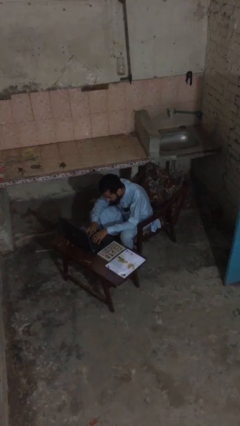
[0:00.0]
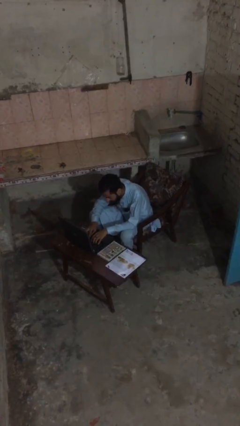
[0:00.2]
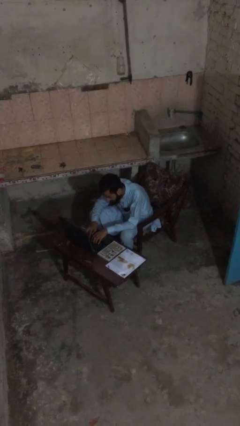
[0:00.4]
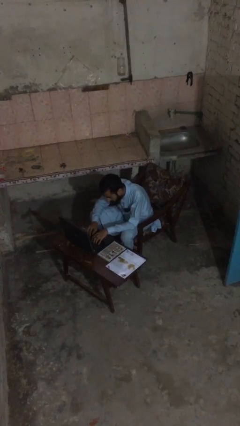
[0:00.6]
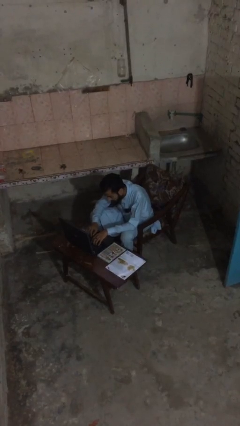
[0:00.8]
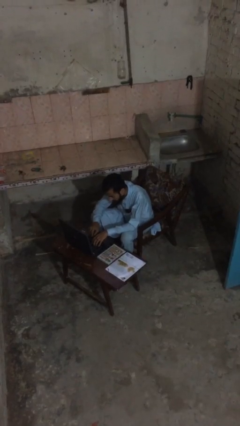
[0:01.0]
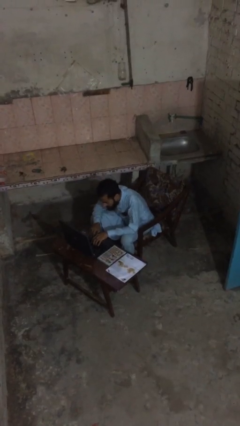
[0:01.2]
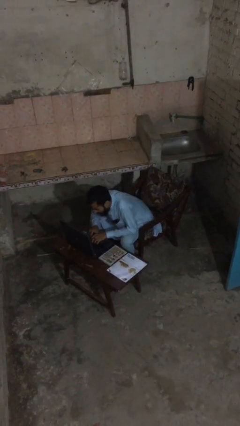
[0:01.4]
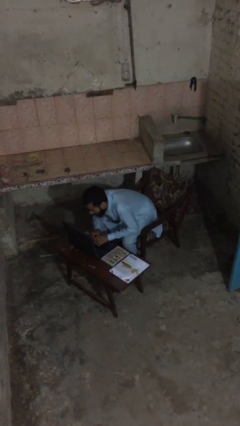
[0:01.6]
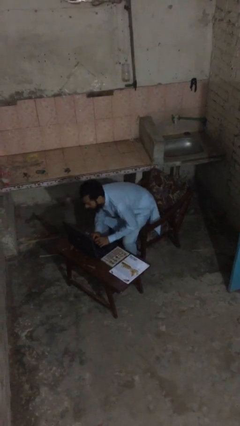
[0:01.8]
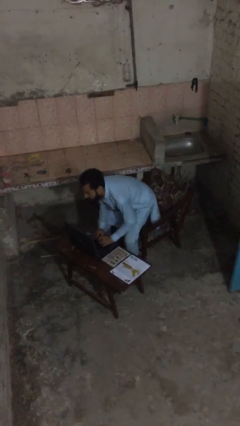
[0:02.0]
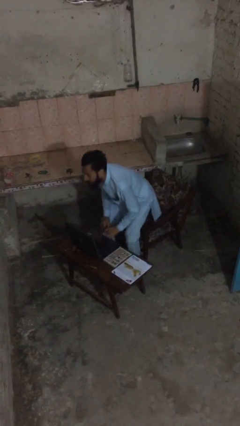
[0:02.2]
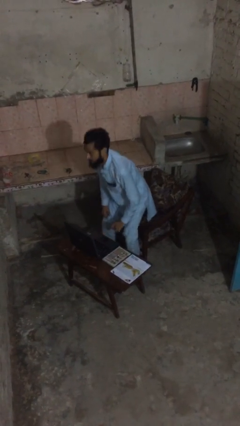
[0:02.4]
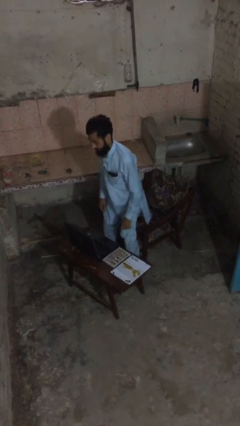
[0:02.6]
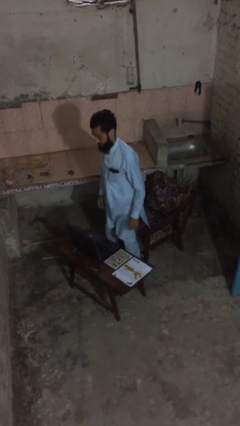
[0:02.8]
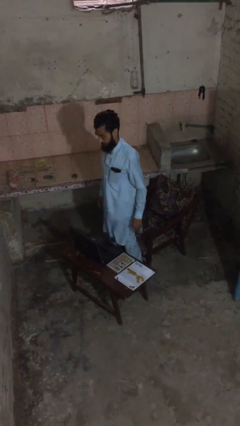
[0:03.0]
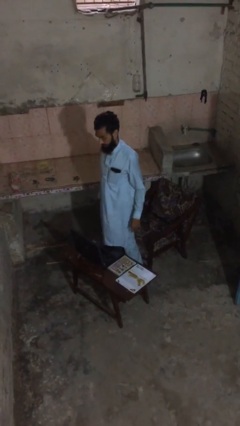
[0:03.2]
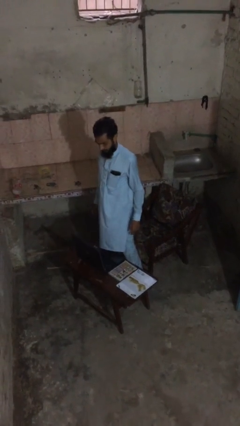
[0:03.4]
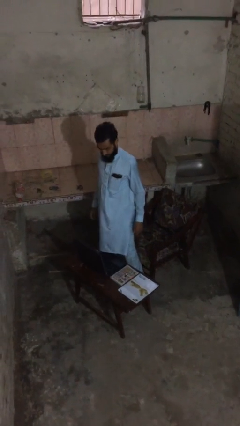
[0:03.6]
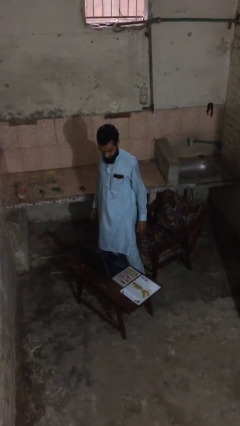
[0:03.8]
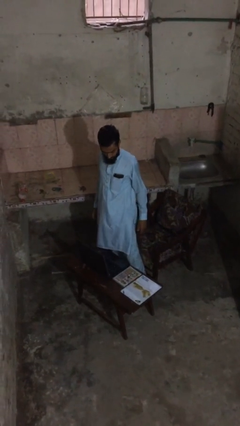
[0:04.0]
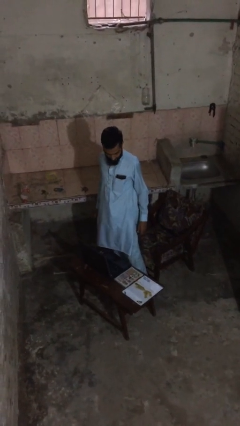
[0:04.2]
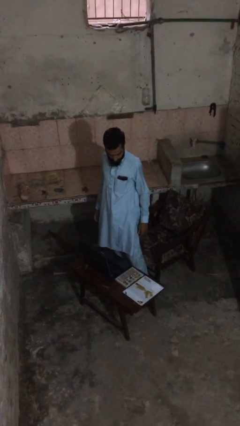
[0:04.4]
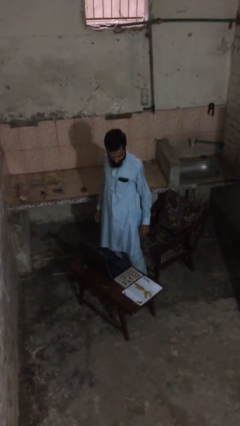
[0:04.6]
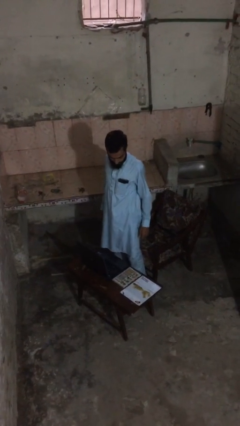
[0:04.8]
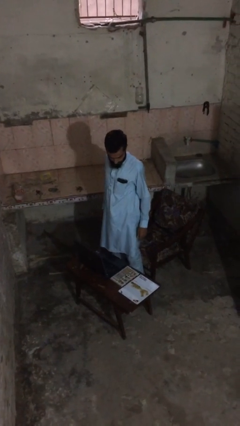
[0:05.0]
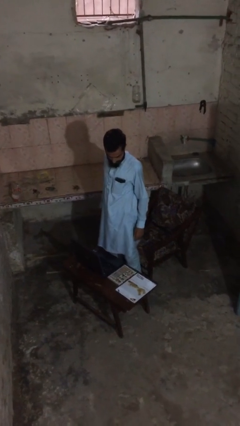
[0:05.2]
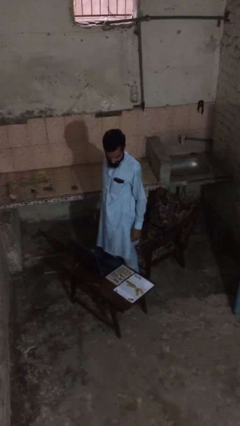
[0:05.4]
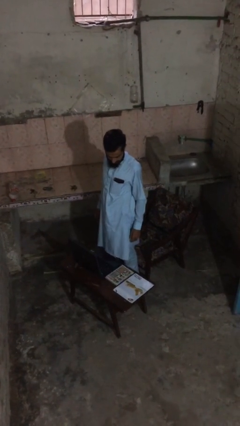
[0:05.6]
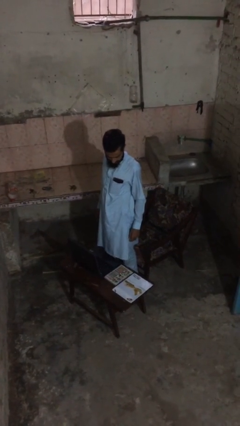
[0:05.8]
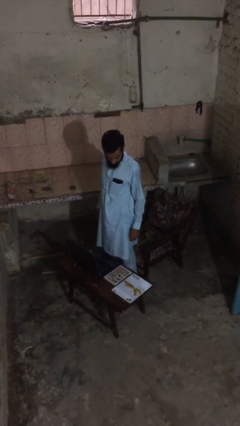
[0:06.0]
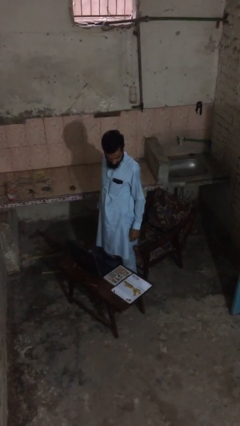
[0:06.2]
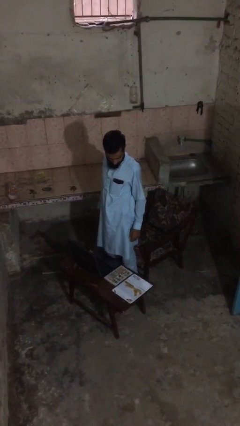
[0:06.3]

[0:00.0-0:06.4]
person stands up

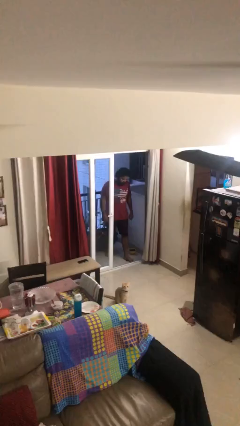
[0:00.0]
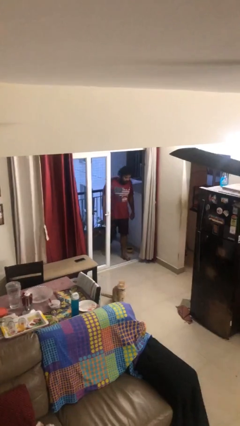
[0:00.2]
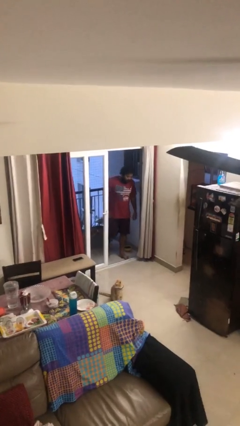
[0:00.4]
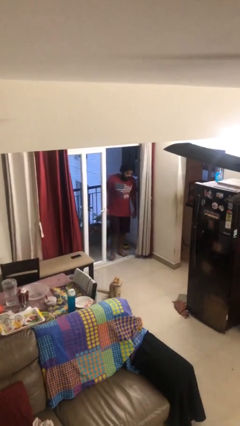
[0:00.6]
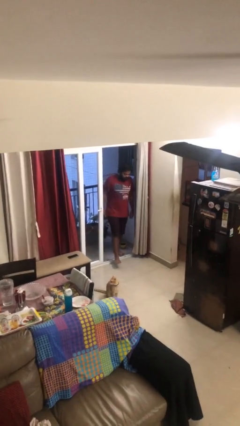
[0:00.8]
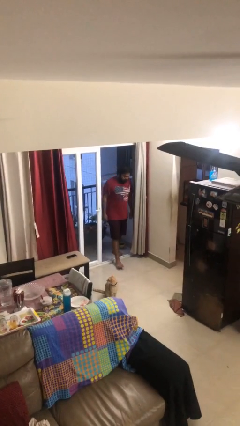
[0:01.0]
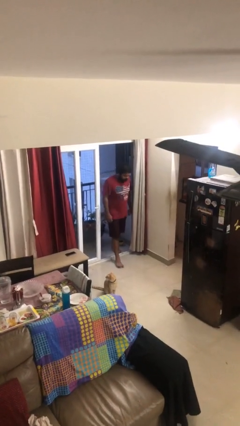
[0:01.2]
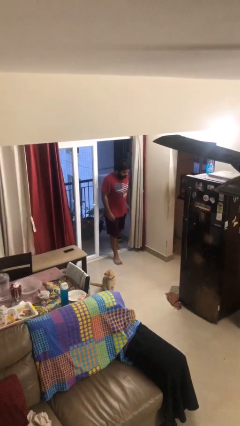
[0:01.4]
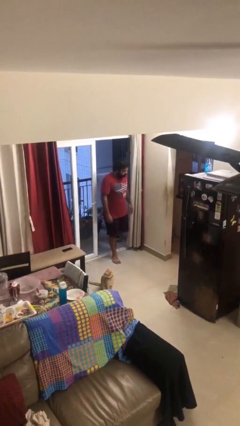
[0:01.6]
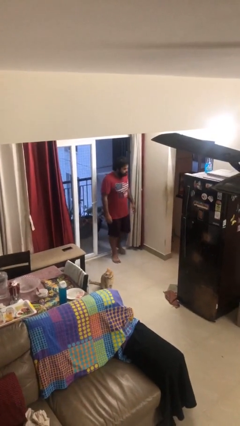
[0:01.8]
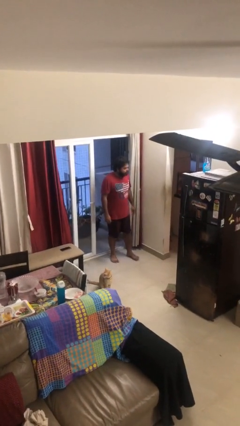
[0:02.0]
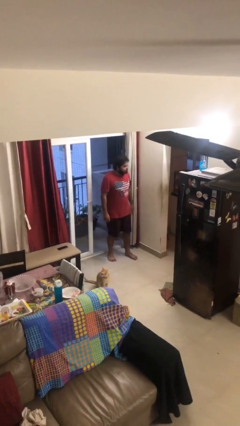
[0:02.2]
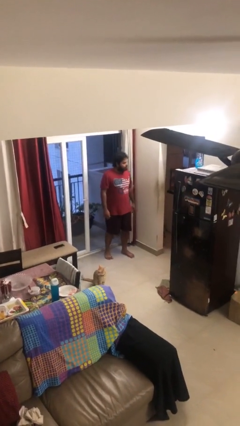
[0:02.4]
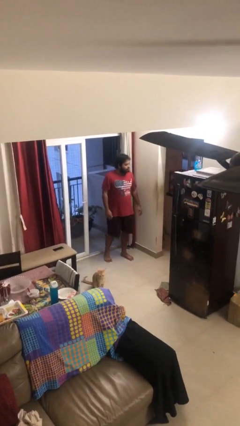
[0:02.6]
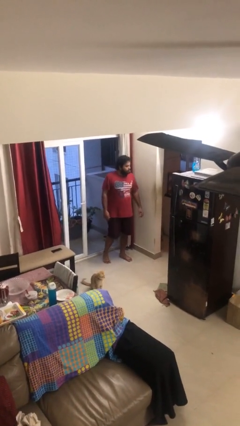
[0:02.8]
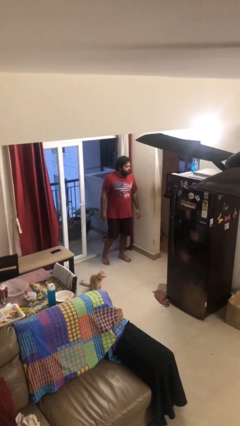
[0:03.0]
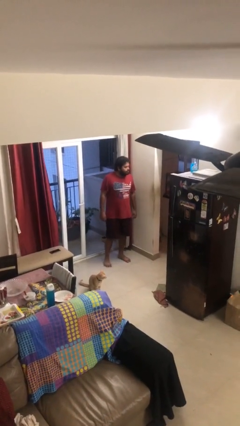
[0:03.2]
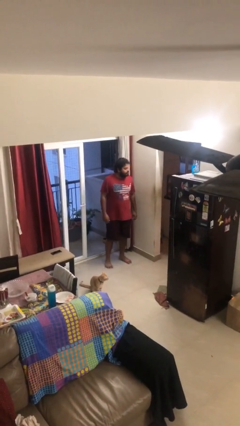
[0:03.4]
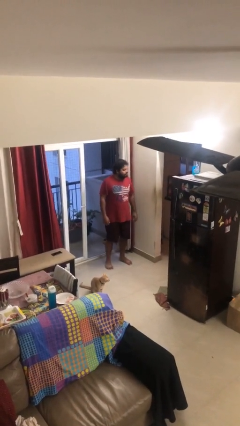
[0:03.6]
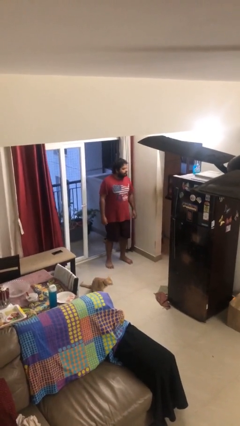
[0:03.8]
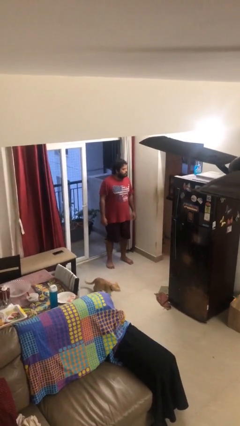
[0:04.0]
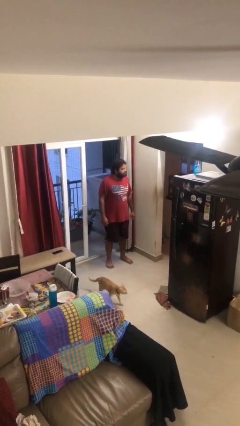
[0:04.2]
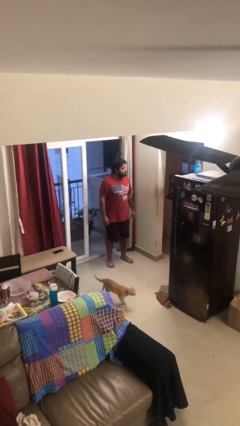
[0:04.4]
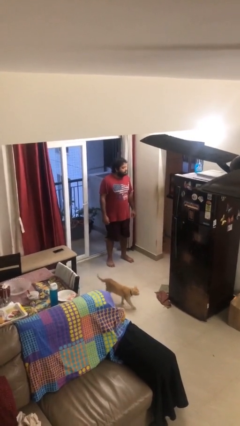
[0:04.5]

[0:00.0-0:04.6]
person enters scene through structure

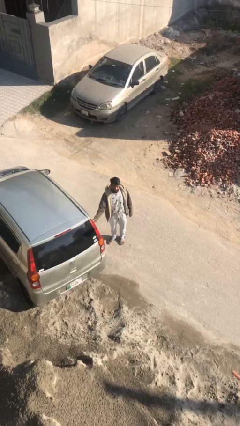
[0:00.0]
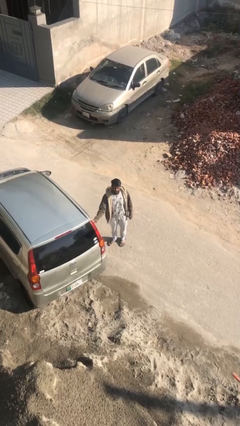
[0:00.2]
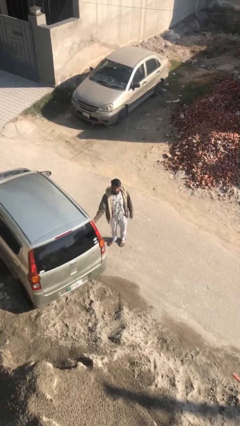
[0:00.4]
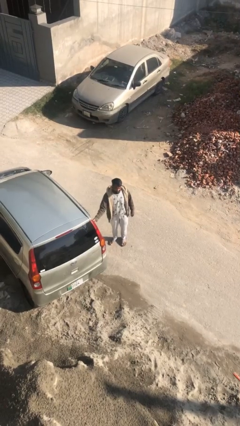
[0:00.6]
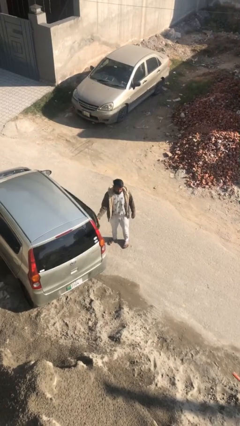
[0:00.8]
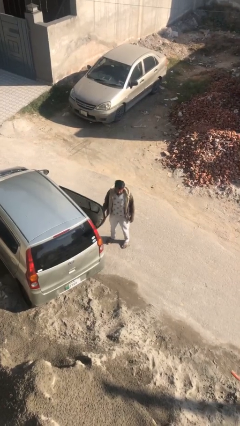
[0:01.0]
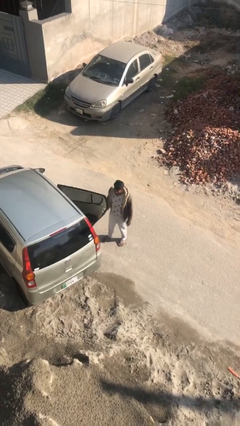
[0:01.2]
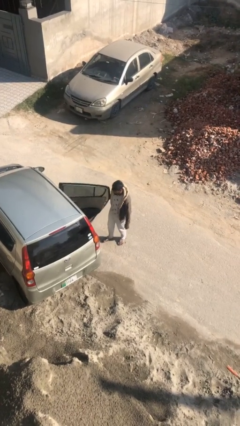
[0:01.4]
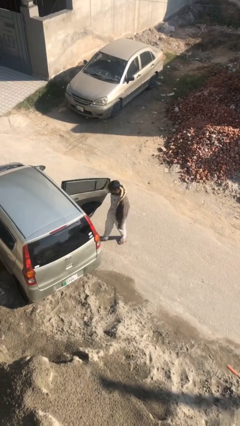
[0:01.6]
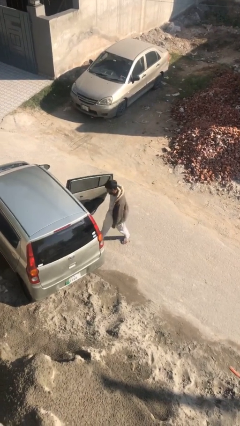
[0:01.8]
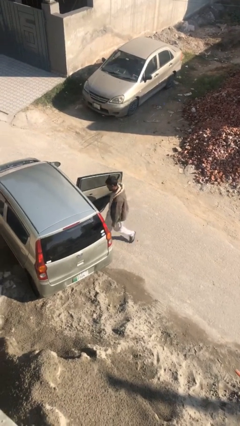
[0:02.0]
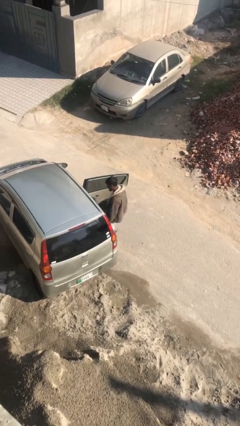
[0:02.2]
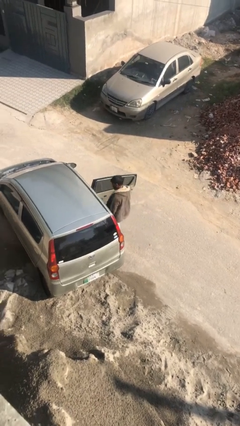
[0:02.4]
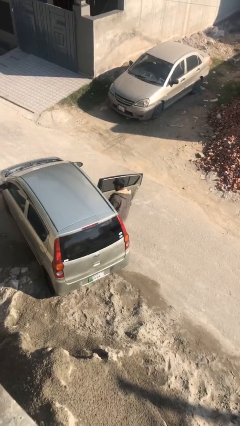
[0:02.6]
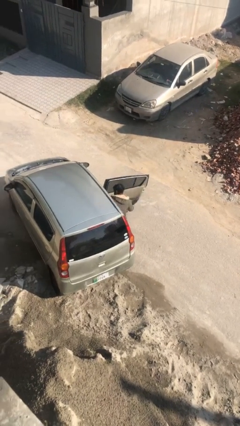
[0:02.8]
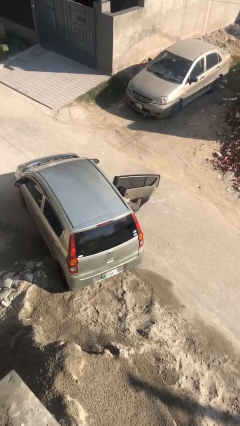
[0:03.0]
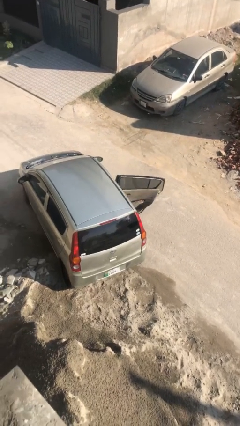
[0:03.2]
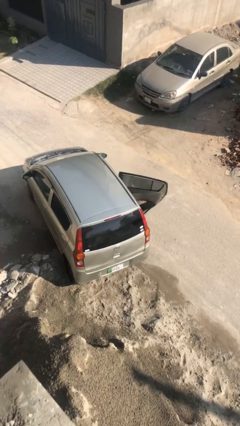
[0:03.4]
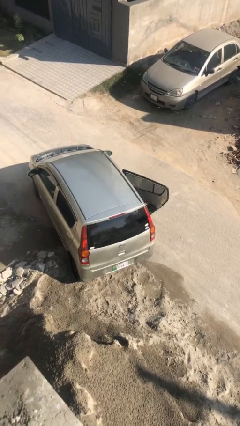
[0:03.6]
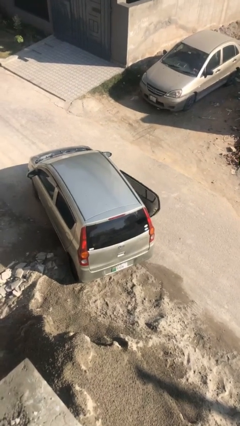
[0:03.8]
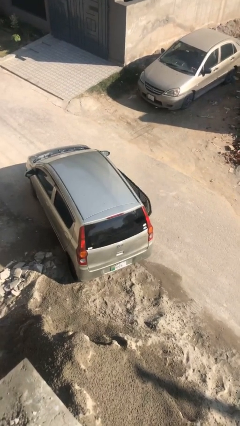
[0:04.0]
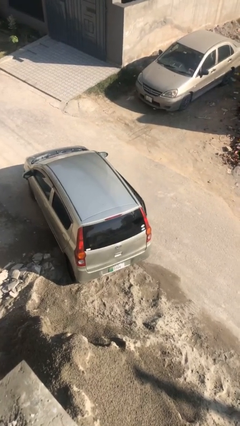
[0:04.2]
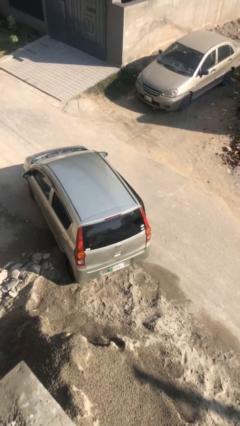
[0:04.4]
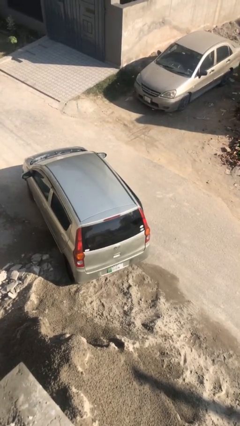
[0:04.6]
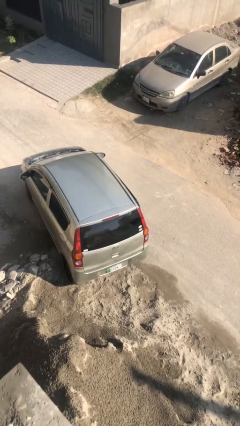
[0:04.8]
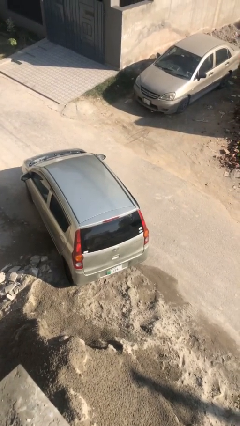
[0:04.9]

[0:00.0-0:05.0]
car picks up person

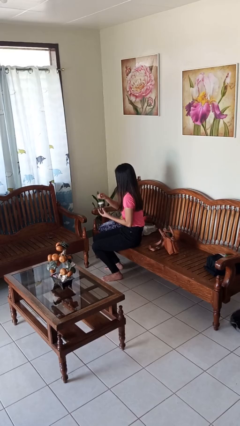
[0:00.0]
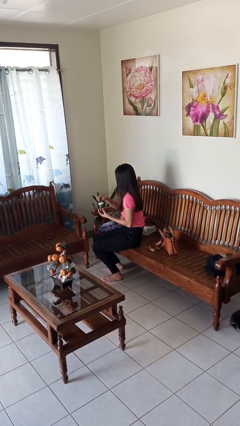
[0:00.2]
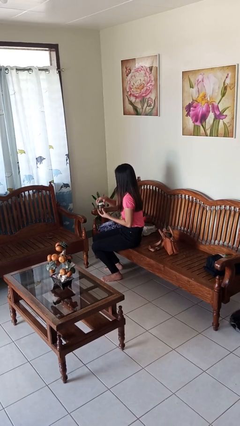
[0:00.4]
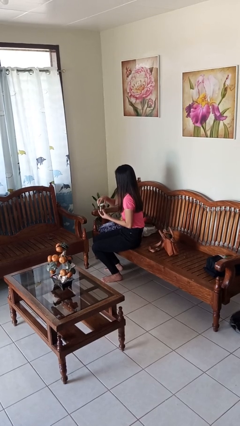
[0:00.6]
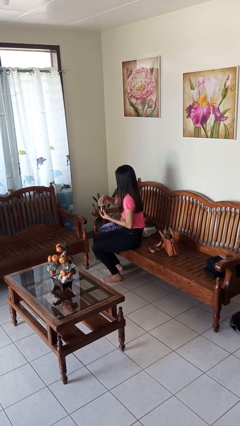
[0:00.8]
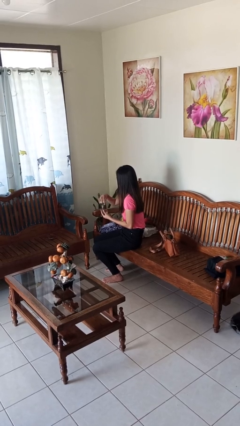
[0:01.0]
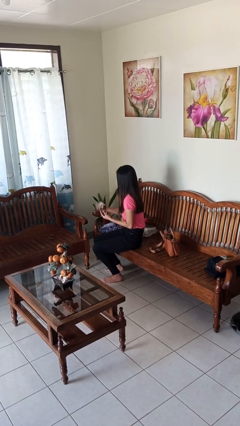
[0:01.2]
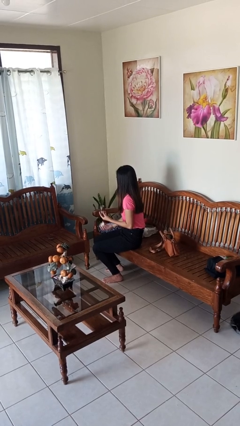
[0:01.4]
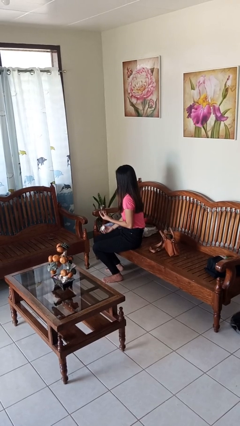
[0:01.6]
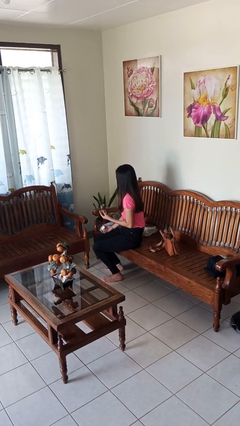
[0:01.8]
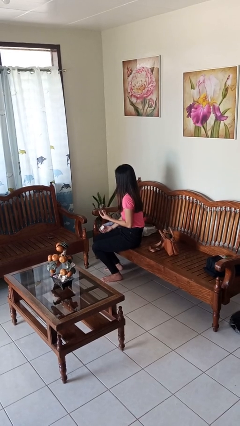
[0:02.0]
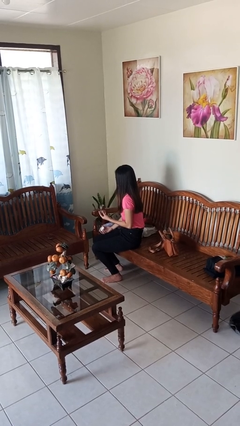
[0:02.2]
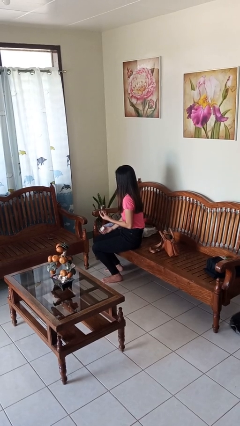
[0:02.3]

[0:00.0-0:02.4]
person opens jar
